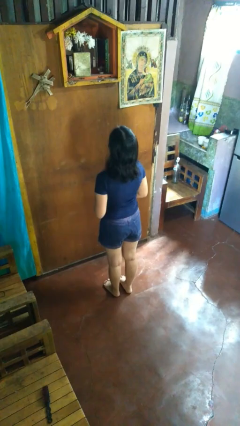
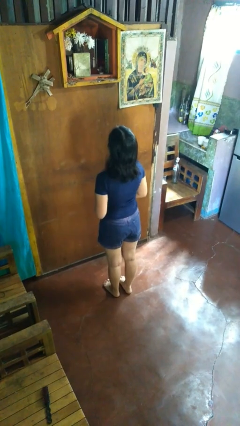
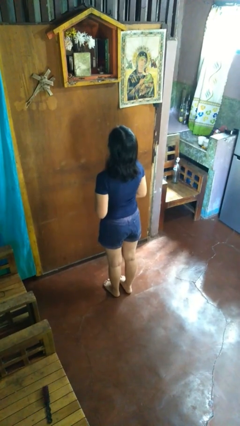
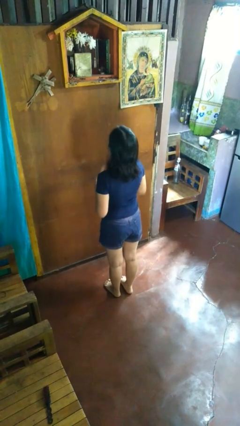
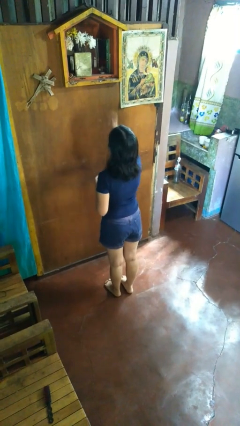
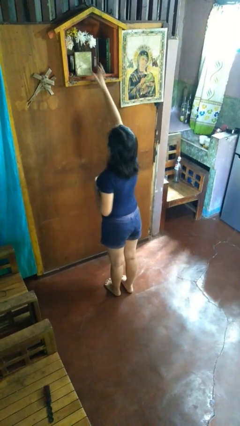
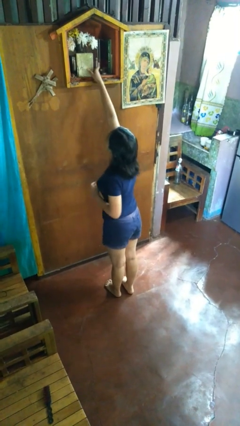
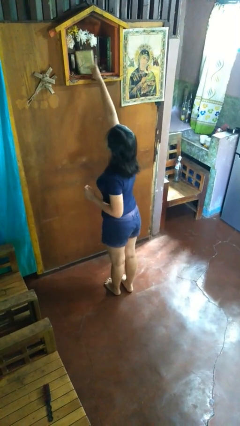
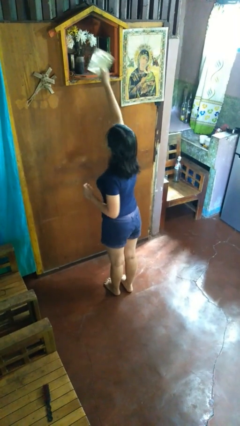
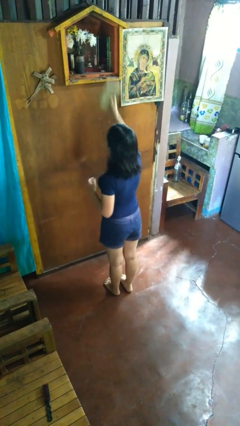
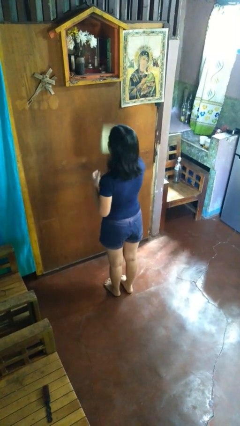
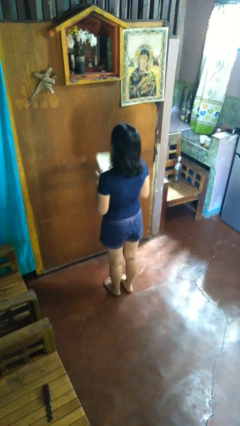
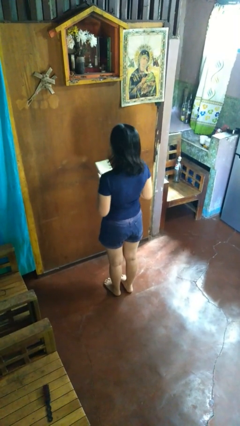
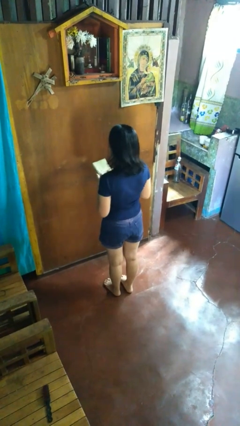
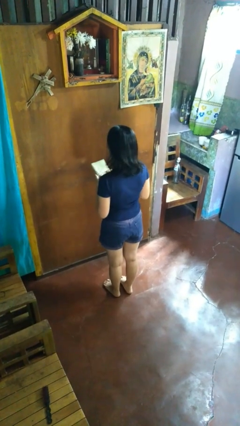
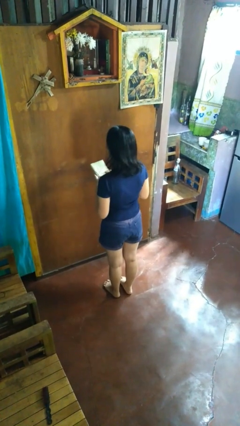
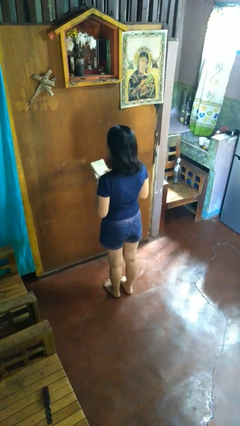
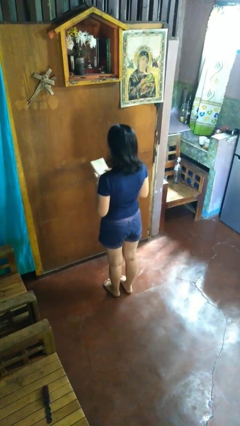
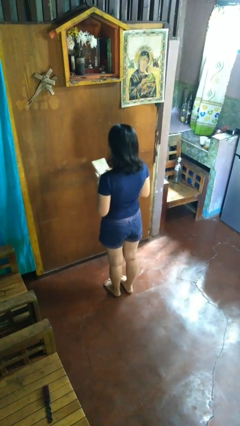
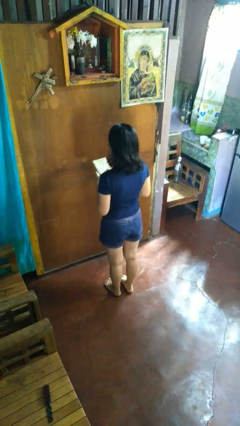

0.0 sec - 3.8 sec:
person picks up object from shelf

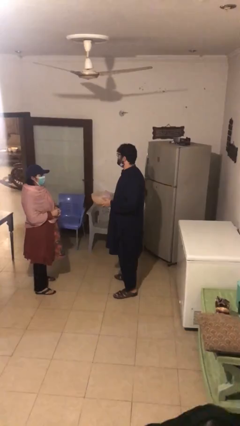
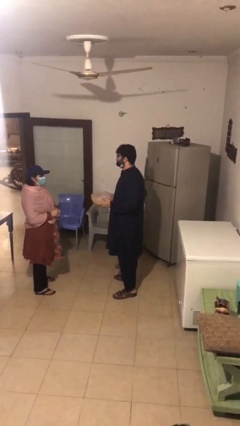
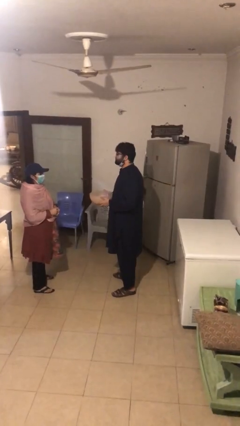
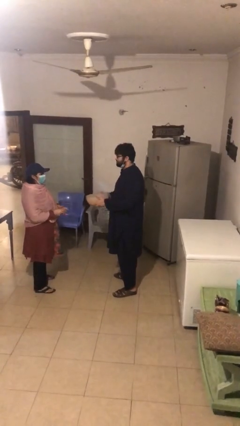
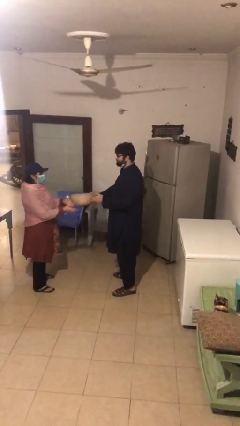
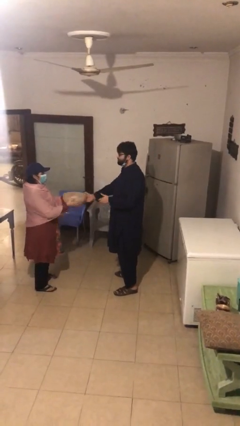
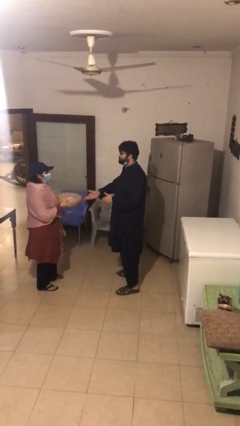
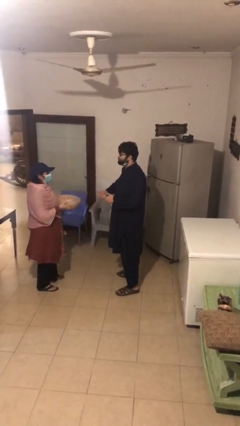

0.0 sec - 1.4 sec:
person transfers object to person

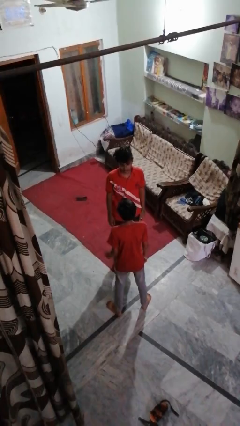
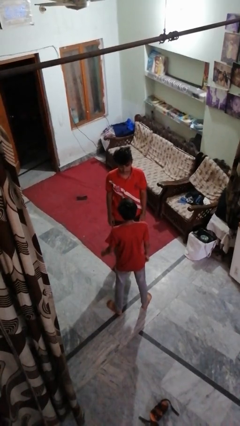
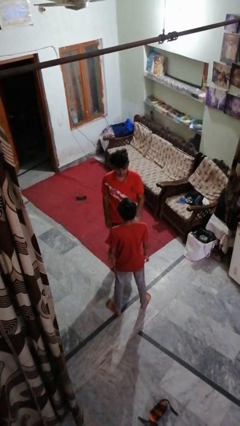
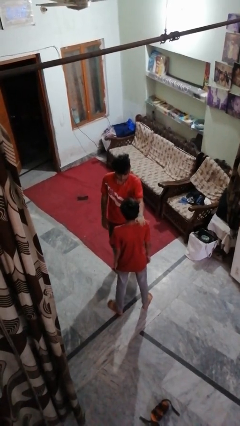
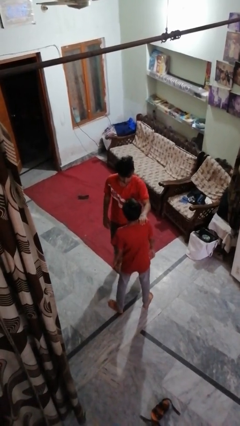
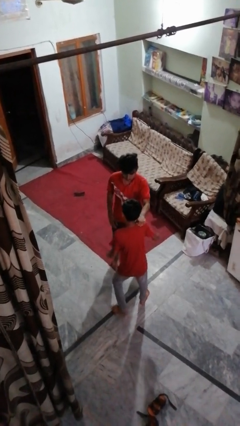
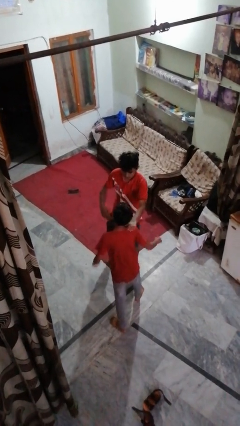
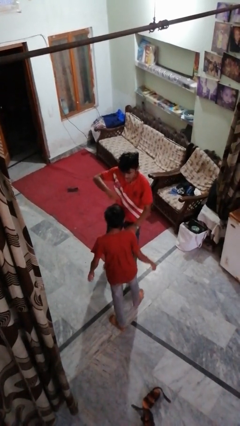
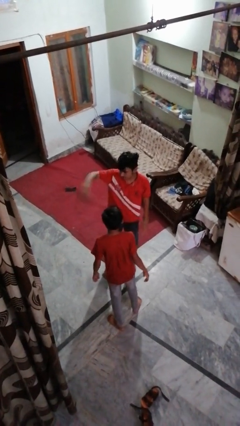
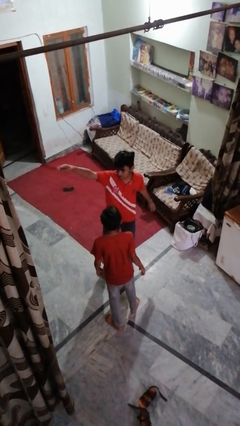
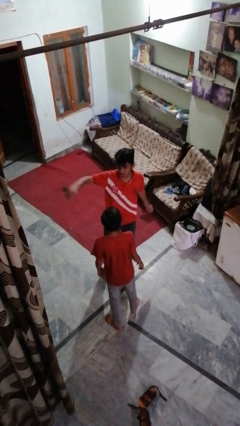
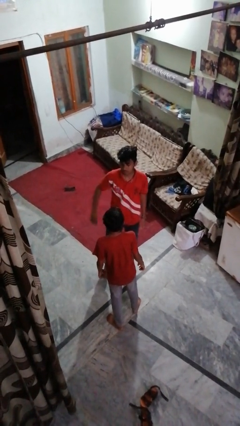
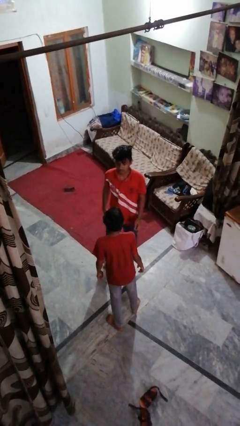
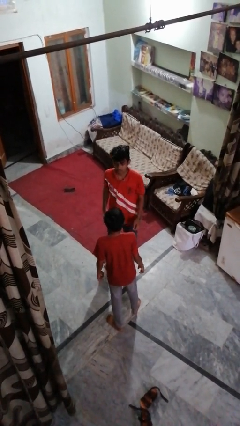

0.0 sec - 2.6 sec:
person shoves person

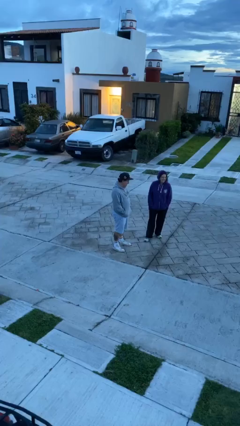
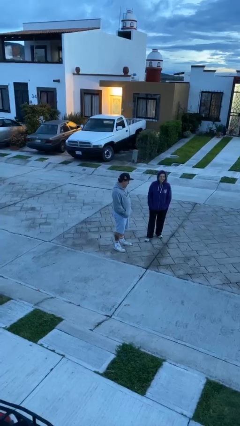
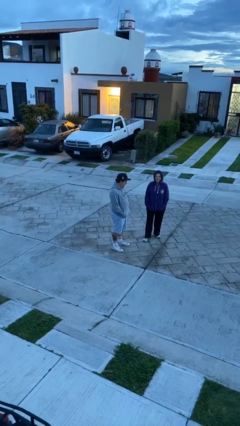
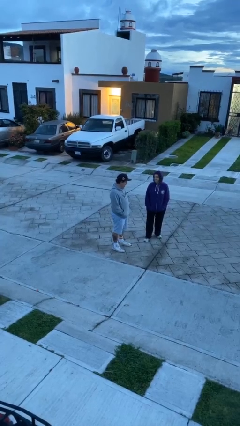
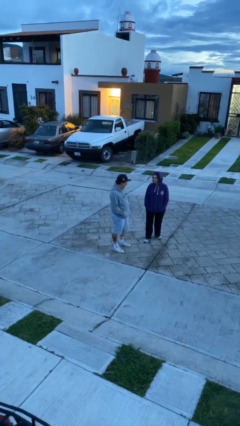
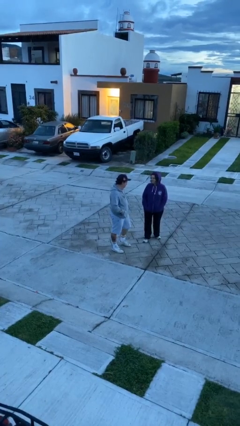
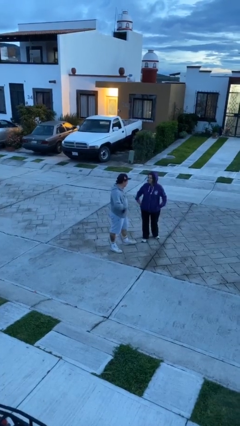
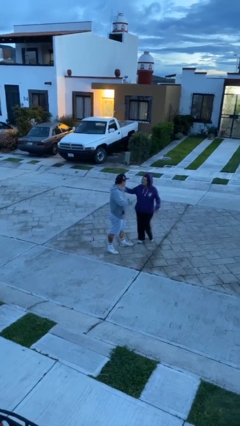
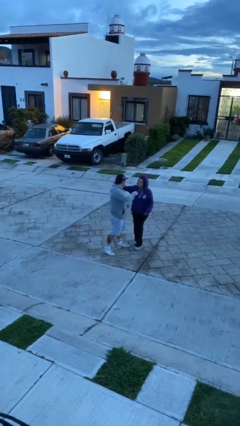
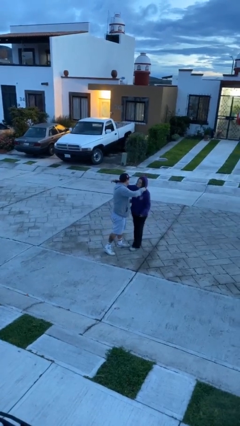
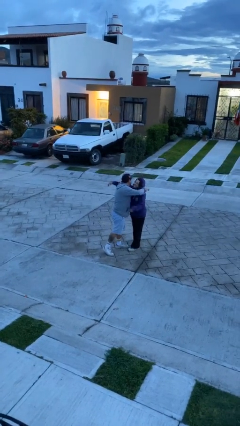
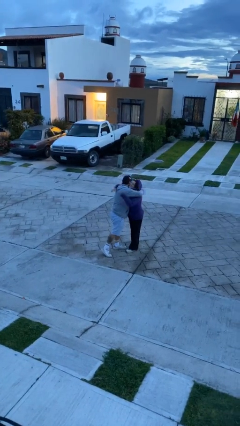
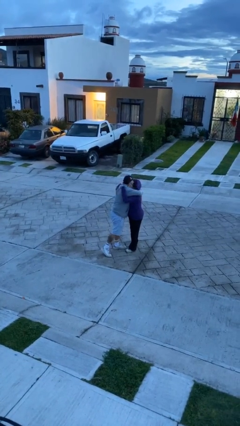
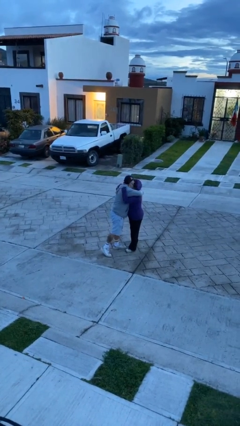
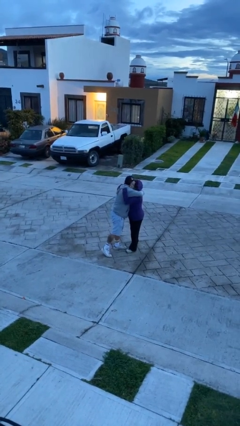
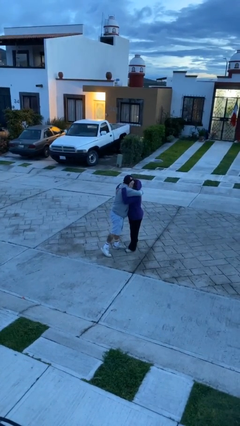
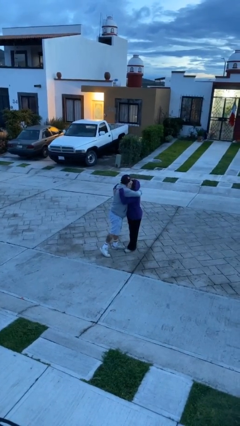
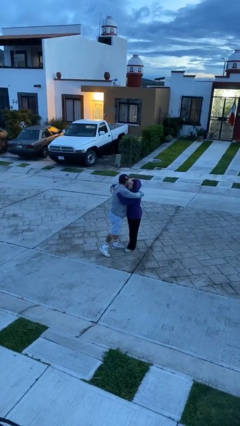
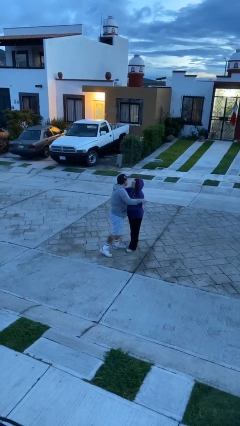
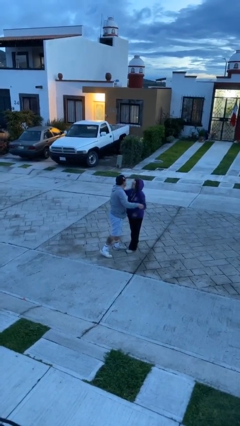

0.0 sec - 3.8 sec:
person embraces person

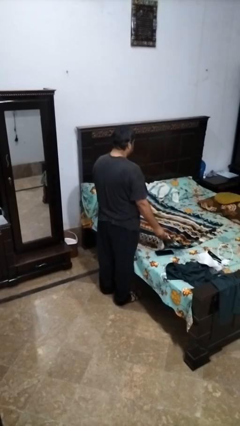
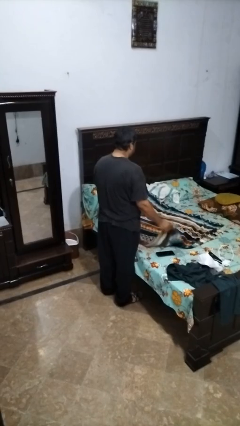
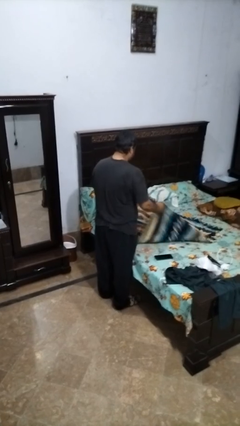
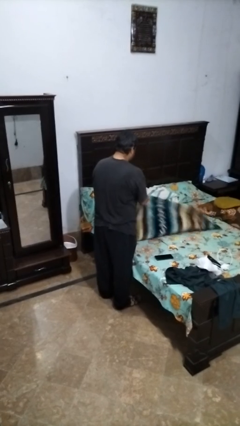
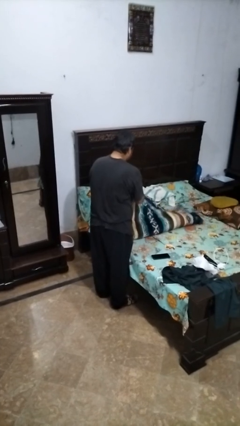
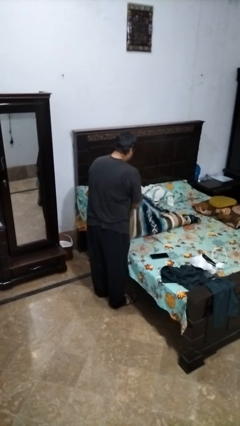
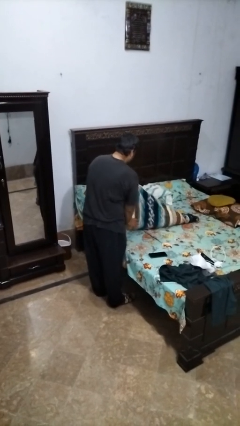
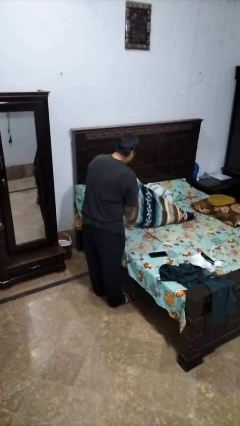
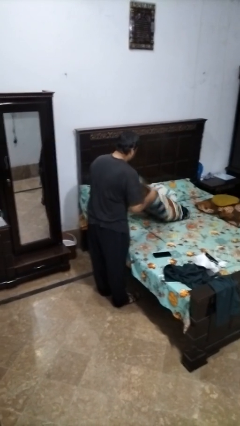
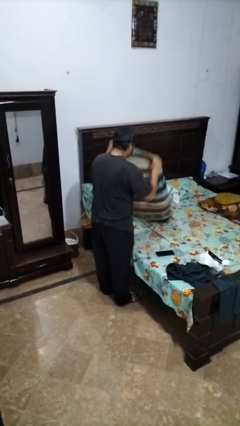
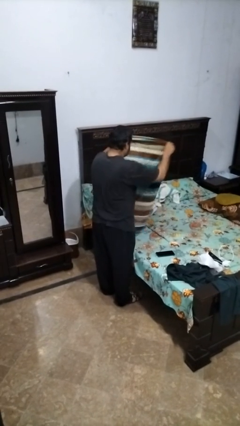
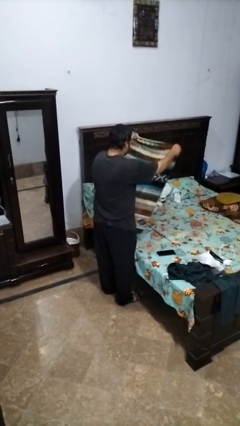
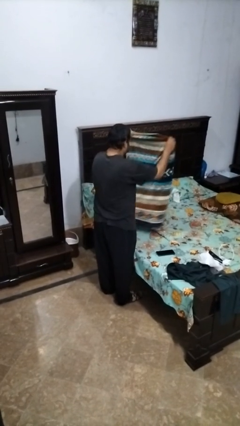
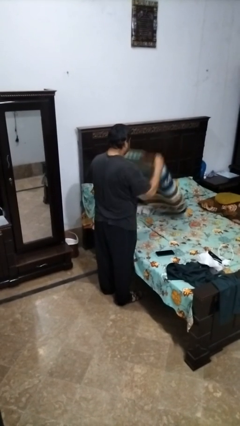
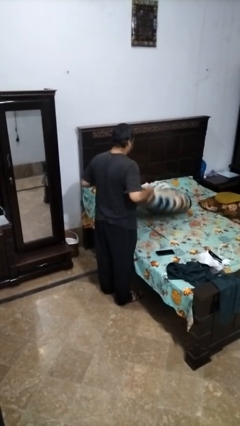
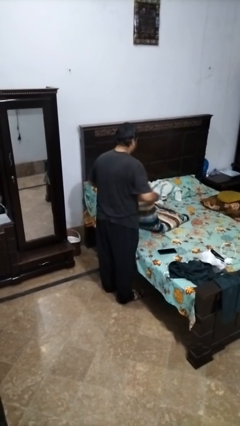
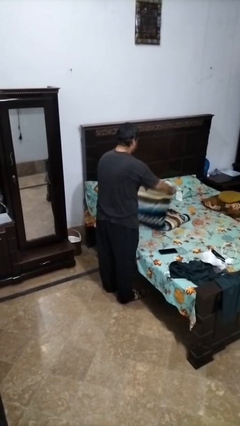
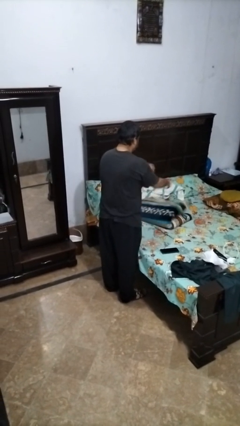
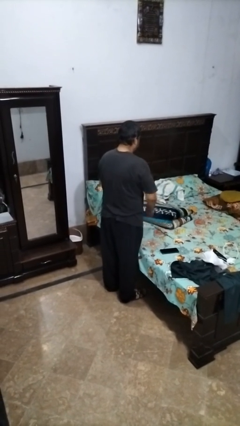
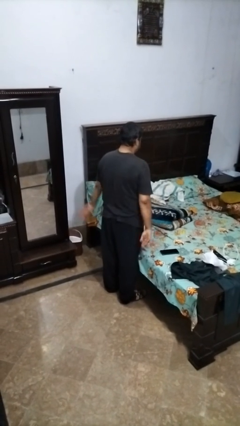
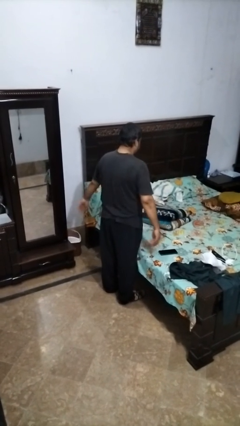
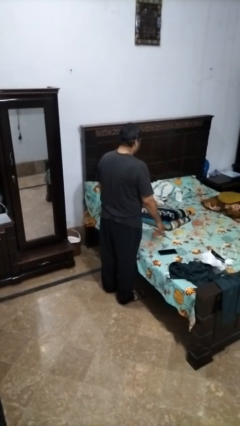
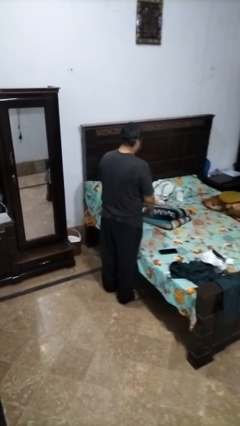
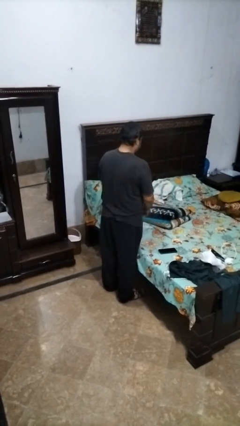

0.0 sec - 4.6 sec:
person folds blanket

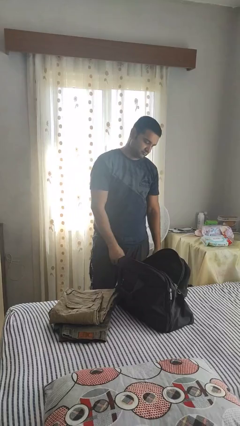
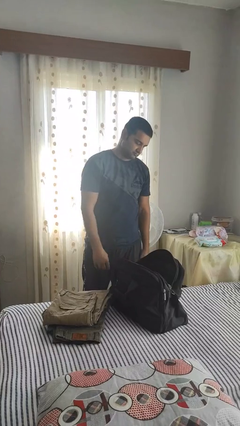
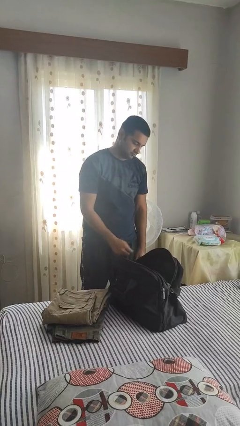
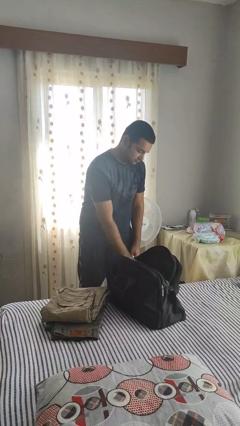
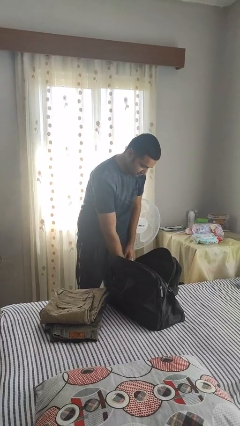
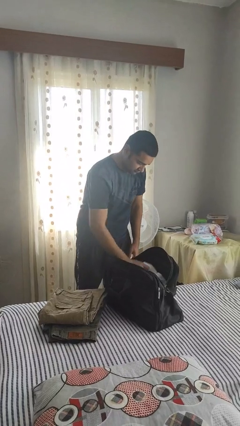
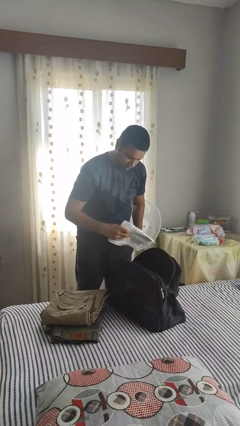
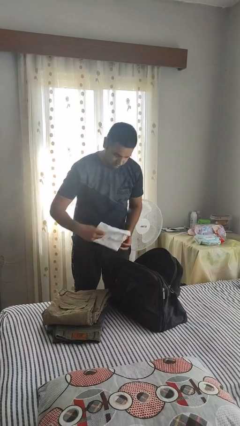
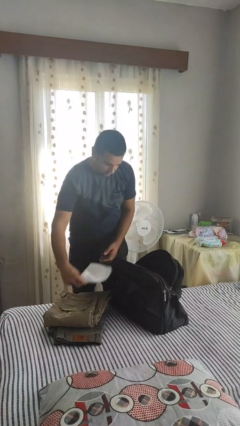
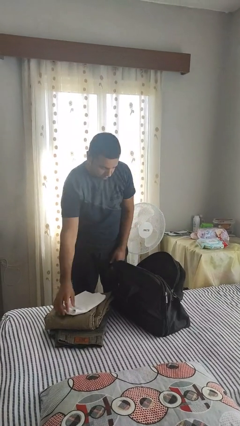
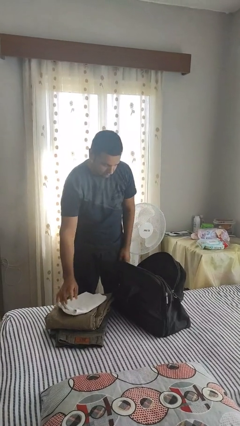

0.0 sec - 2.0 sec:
person unloads clothes from suitcase
